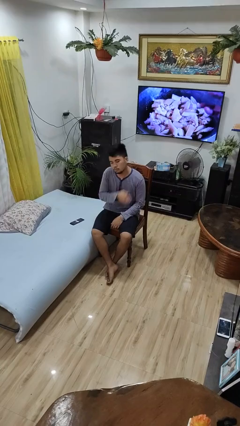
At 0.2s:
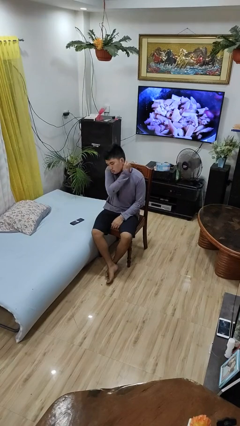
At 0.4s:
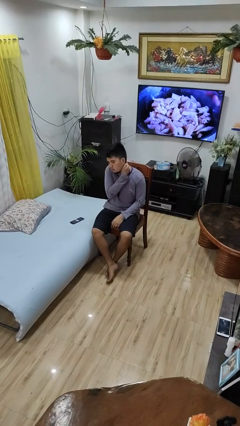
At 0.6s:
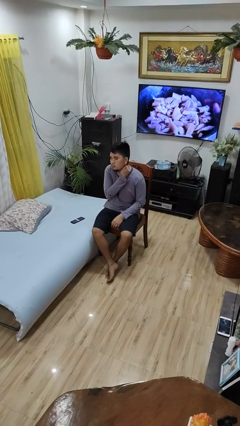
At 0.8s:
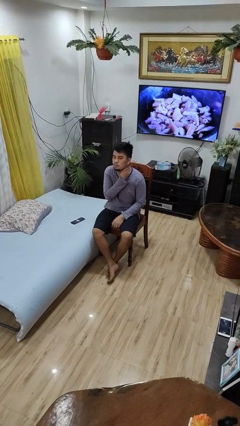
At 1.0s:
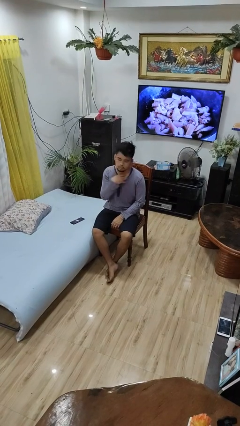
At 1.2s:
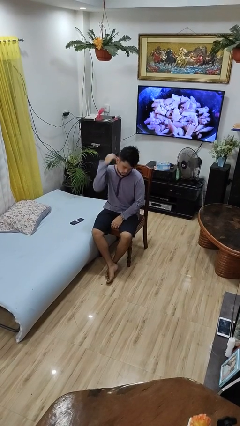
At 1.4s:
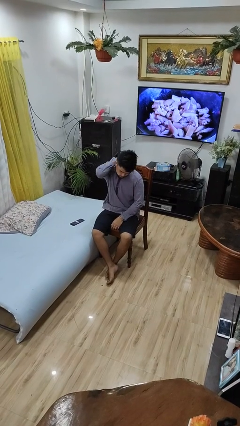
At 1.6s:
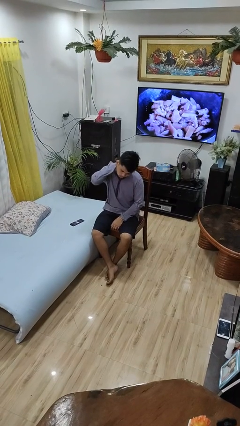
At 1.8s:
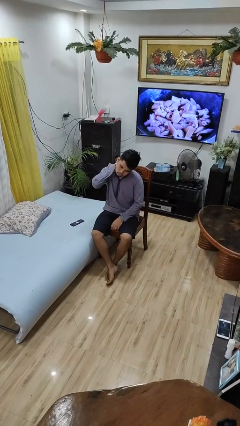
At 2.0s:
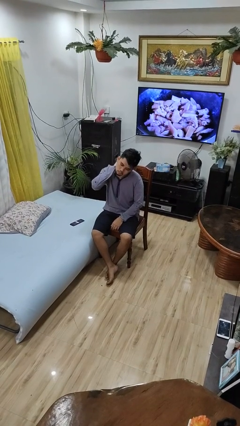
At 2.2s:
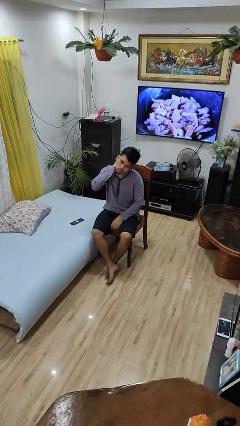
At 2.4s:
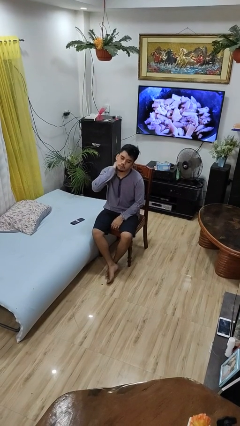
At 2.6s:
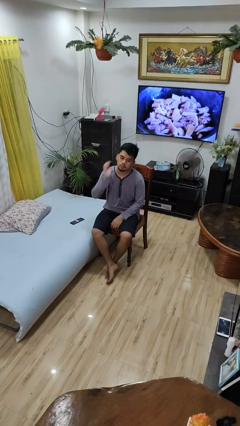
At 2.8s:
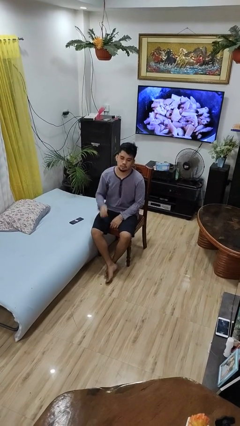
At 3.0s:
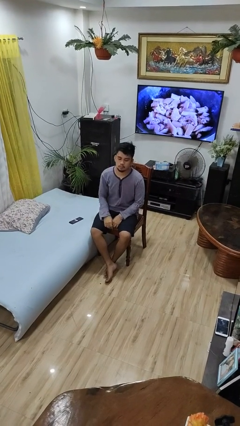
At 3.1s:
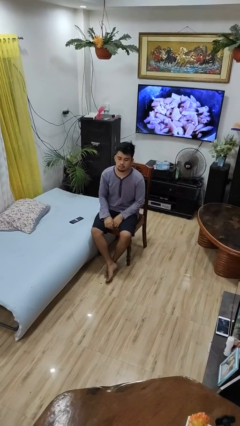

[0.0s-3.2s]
person rubs neck

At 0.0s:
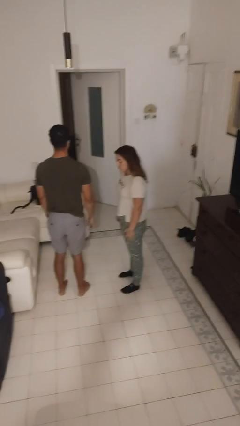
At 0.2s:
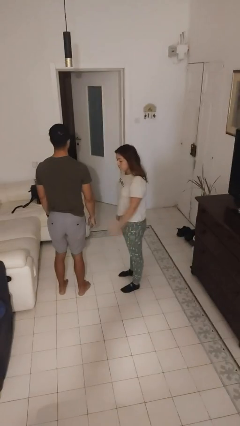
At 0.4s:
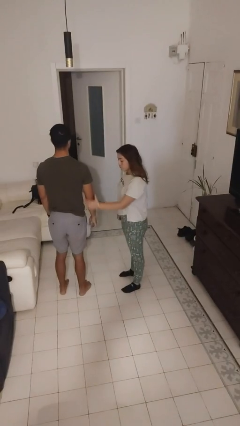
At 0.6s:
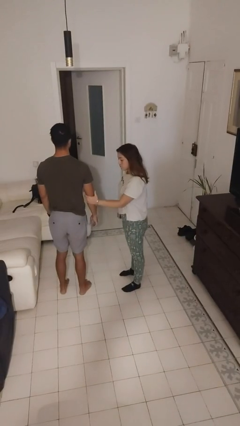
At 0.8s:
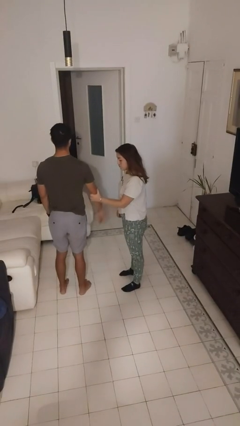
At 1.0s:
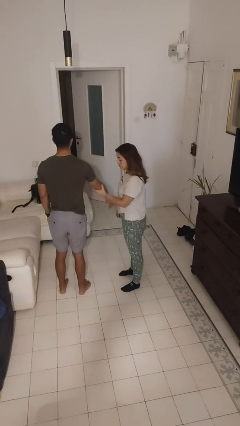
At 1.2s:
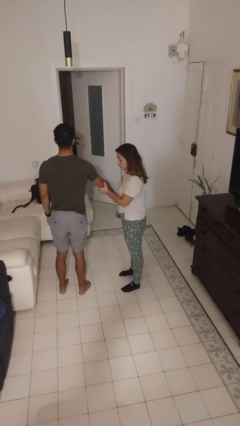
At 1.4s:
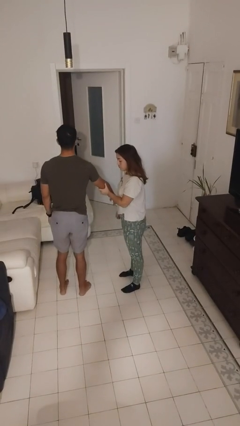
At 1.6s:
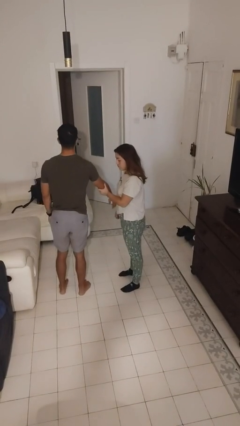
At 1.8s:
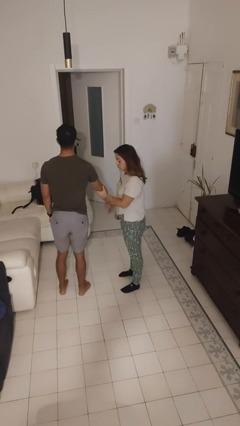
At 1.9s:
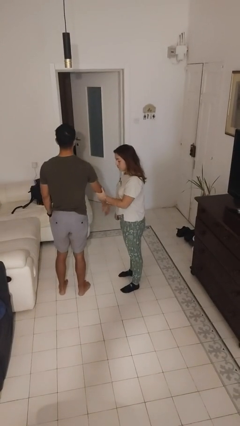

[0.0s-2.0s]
person grabs person by forearm

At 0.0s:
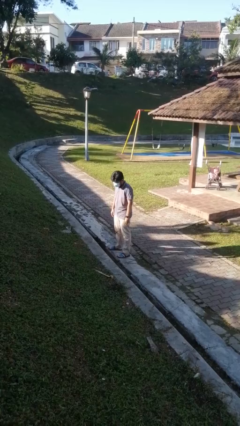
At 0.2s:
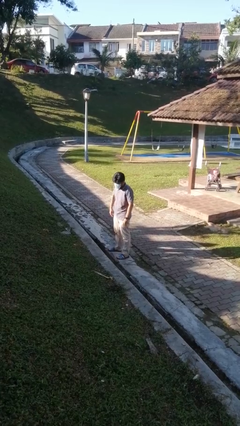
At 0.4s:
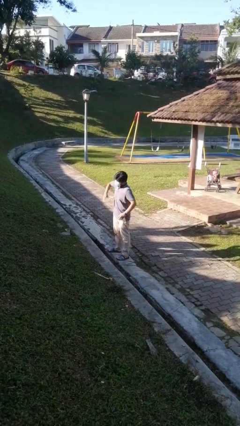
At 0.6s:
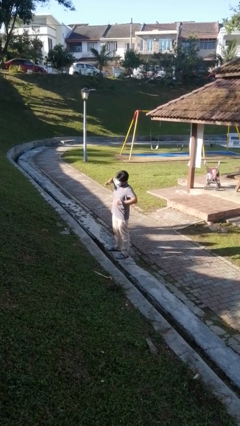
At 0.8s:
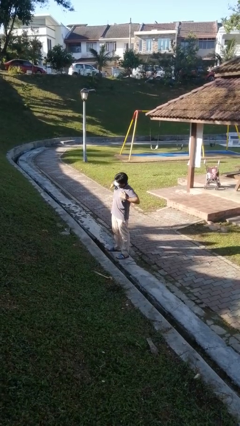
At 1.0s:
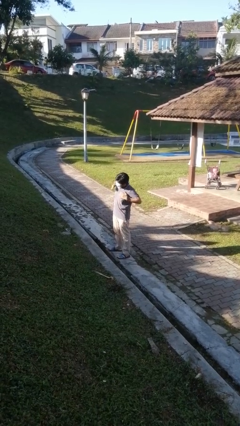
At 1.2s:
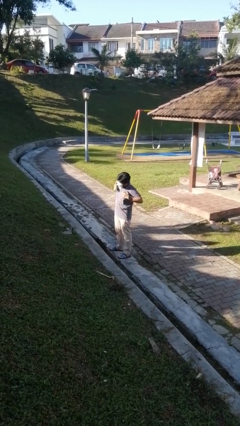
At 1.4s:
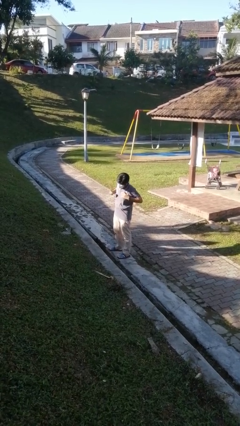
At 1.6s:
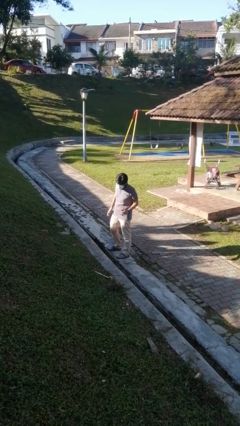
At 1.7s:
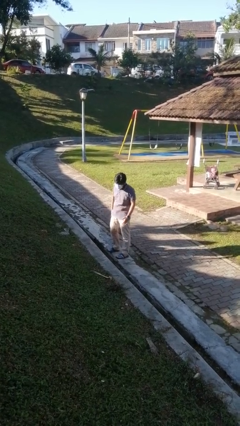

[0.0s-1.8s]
person drums on chest

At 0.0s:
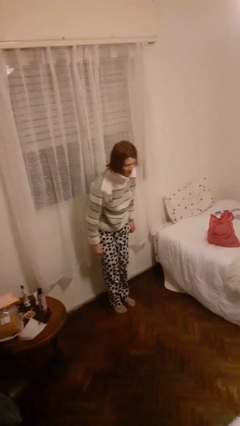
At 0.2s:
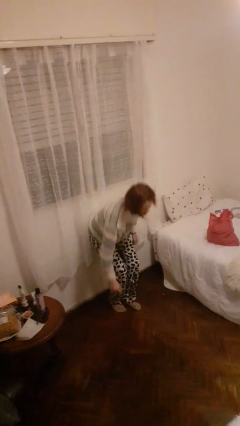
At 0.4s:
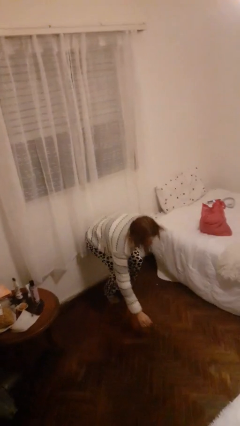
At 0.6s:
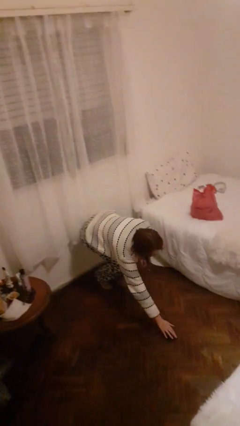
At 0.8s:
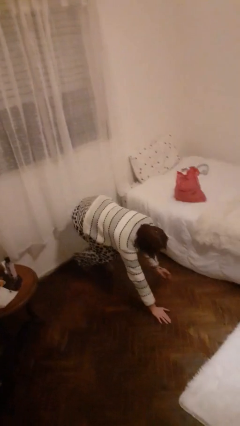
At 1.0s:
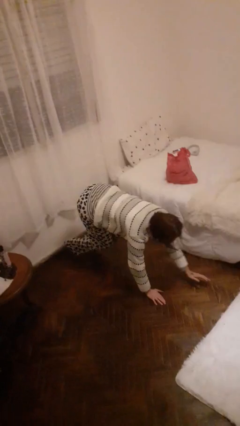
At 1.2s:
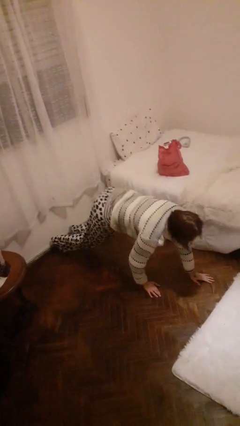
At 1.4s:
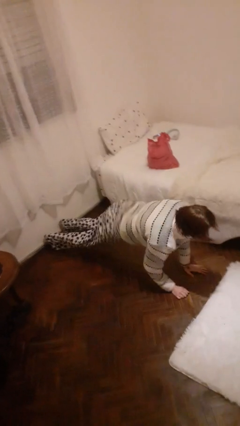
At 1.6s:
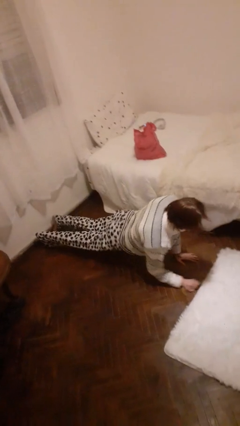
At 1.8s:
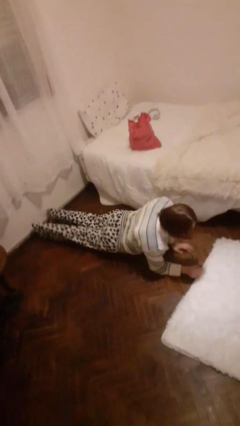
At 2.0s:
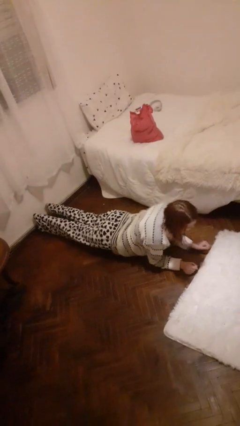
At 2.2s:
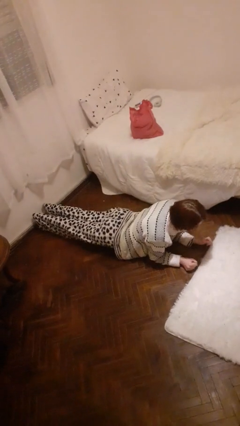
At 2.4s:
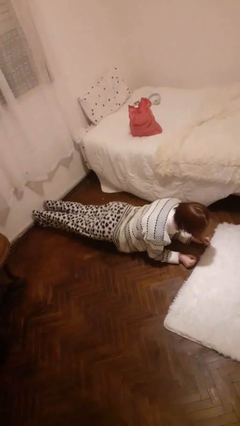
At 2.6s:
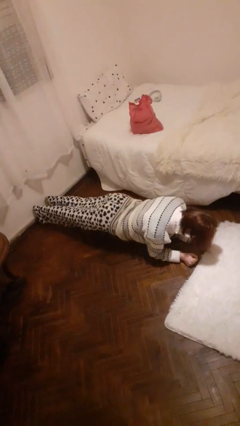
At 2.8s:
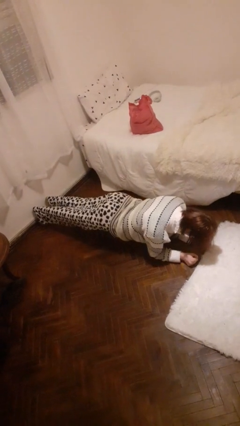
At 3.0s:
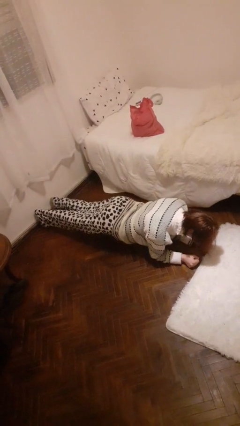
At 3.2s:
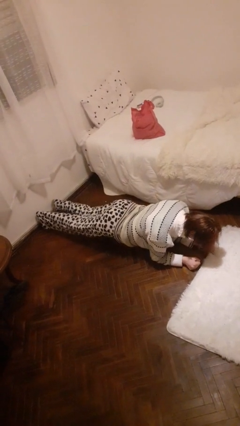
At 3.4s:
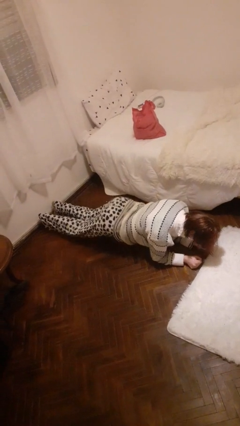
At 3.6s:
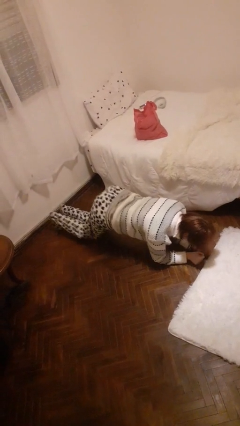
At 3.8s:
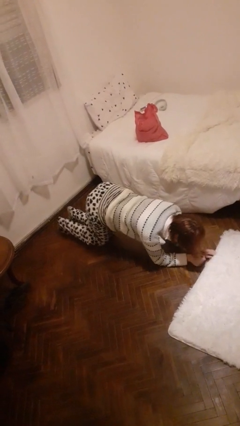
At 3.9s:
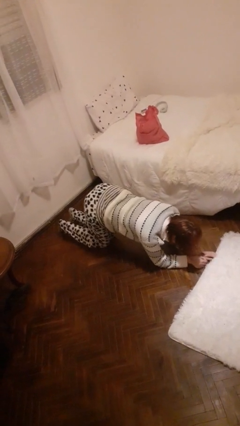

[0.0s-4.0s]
person exercises with plank

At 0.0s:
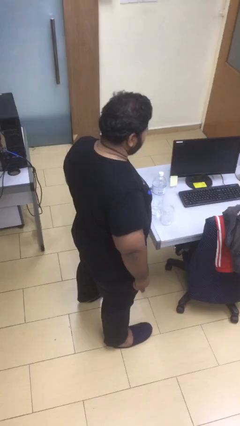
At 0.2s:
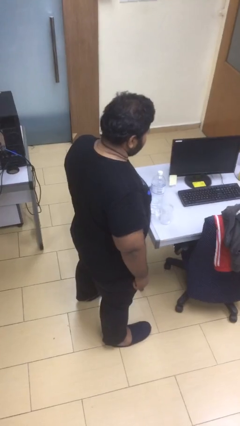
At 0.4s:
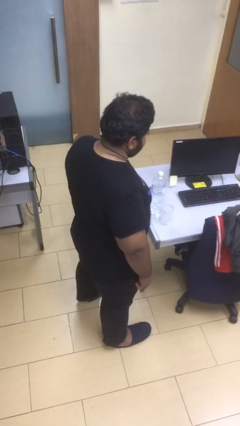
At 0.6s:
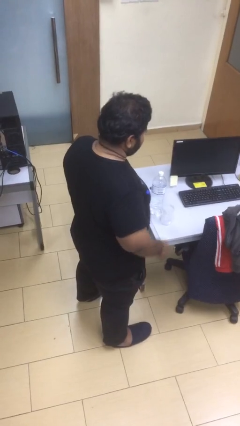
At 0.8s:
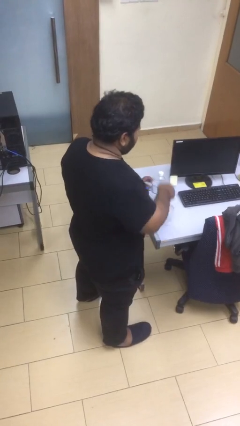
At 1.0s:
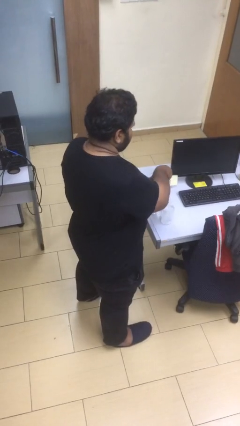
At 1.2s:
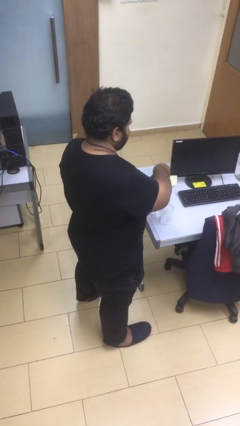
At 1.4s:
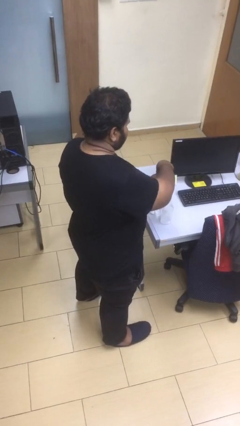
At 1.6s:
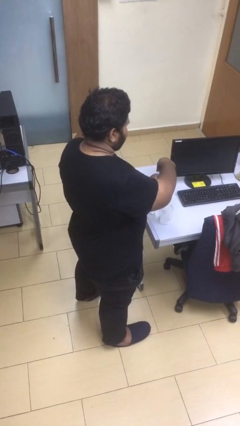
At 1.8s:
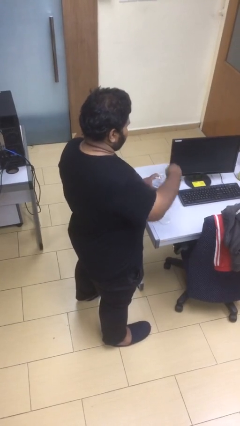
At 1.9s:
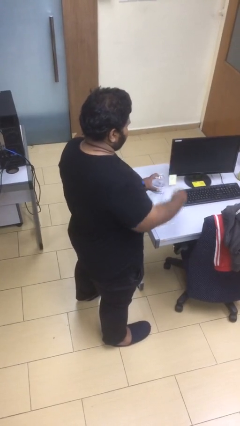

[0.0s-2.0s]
person unscrews lid from bottle

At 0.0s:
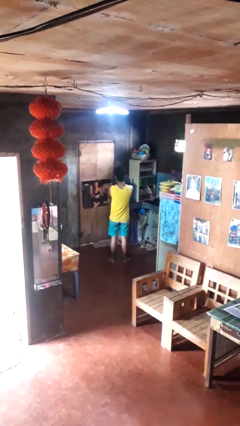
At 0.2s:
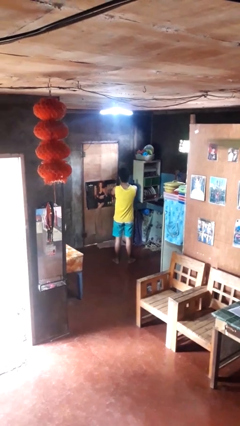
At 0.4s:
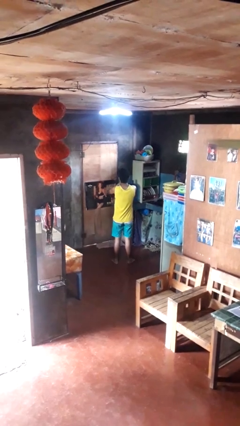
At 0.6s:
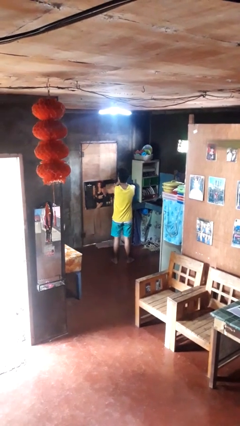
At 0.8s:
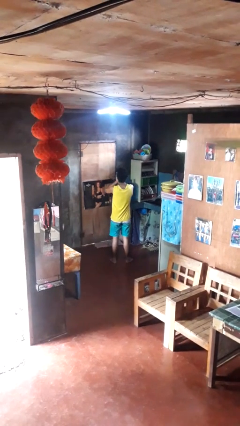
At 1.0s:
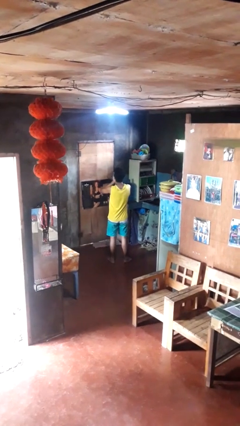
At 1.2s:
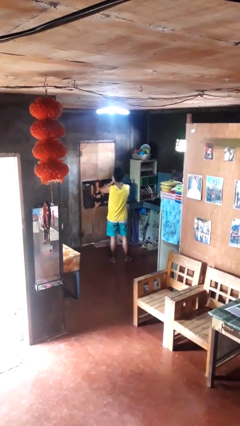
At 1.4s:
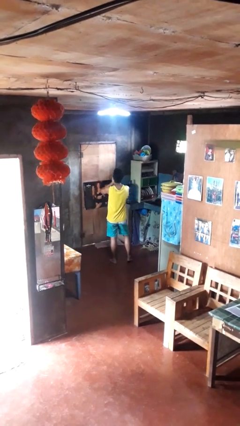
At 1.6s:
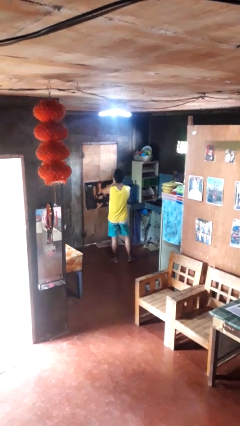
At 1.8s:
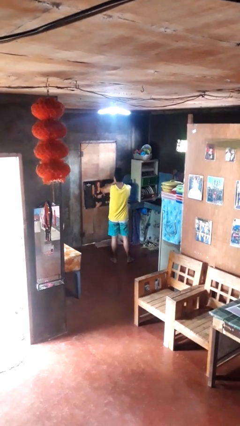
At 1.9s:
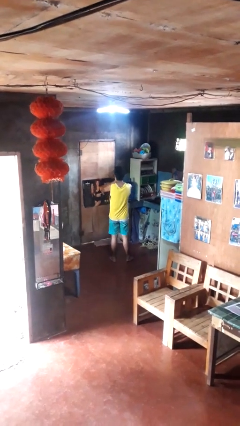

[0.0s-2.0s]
person yawns

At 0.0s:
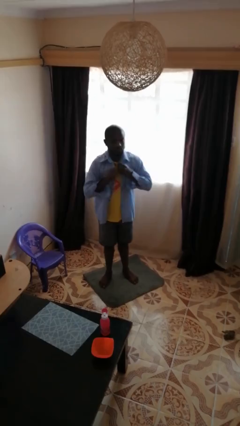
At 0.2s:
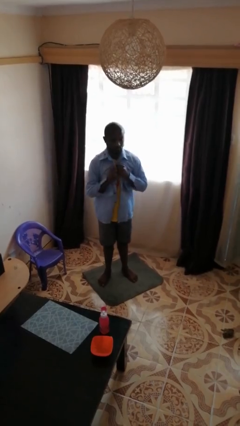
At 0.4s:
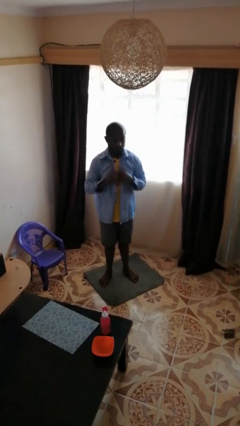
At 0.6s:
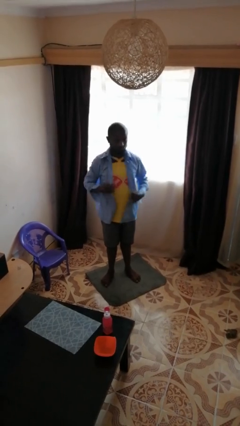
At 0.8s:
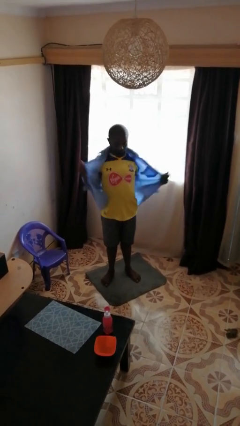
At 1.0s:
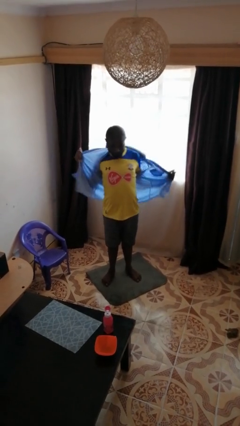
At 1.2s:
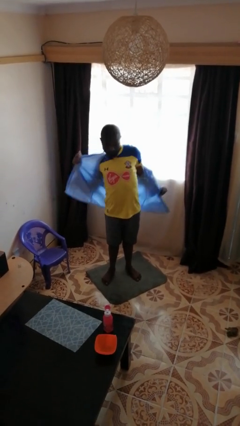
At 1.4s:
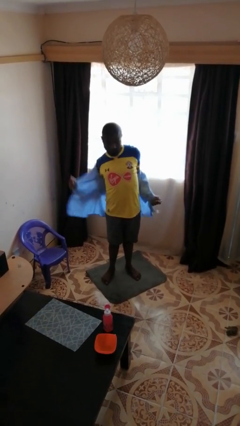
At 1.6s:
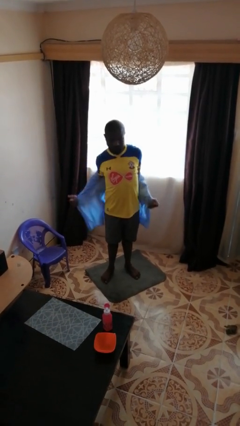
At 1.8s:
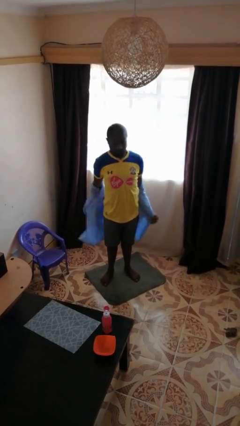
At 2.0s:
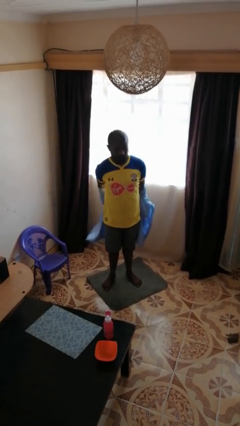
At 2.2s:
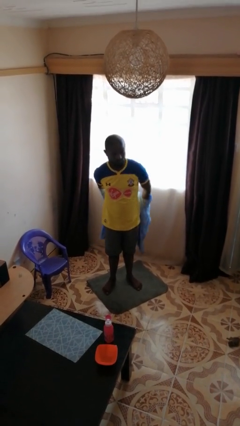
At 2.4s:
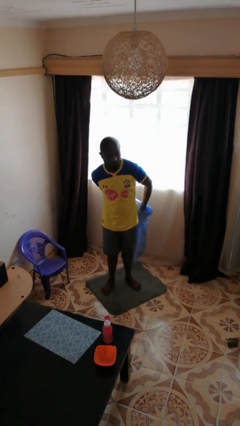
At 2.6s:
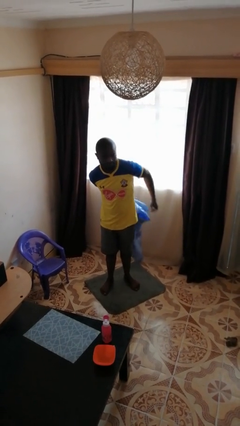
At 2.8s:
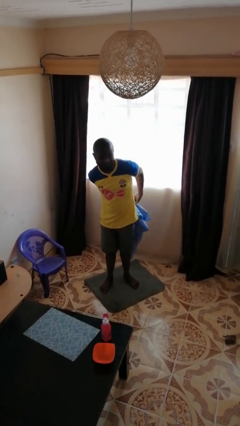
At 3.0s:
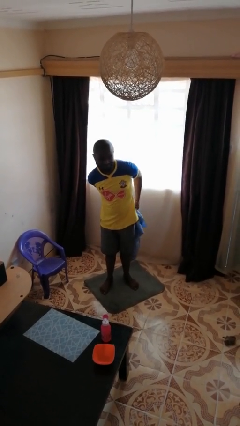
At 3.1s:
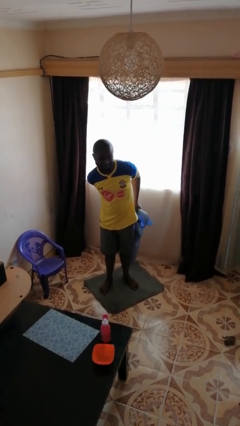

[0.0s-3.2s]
person takes off shirt
